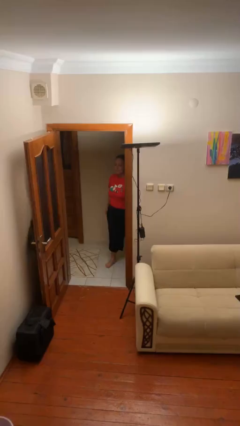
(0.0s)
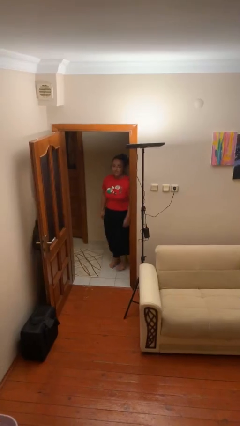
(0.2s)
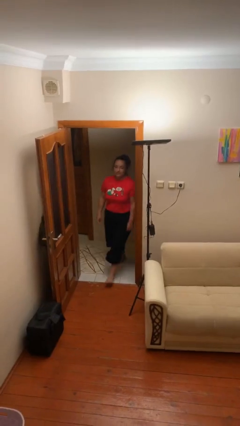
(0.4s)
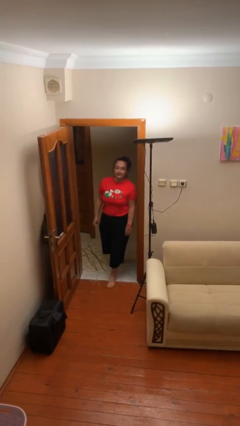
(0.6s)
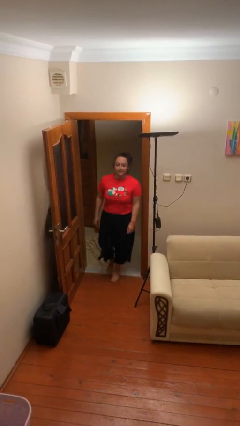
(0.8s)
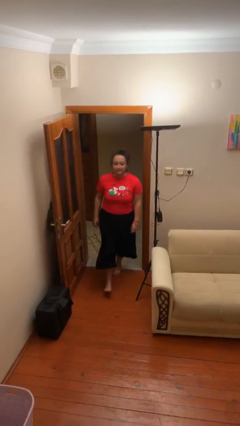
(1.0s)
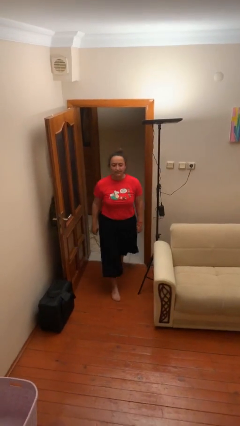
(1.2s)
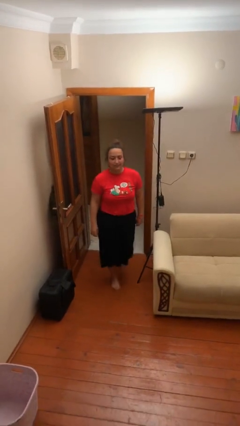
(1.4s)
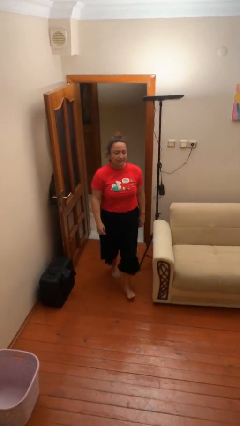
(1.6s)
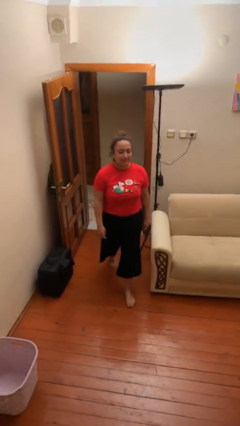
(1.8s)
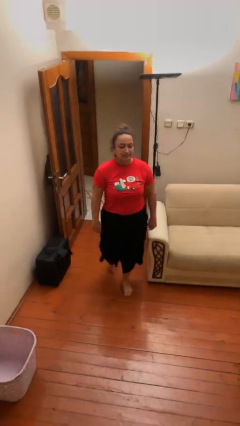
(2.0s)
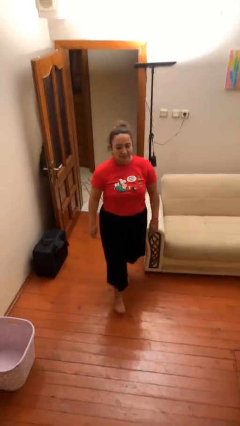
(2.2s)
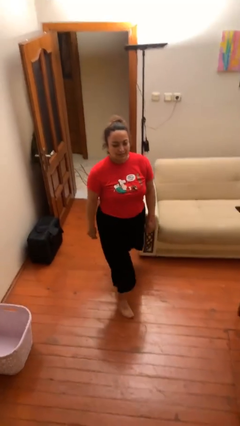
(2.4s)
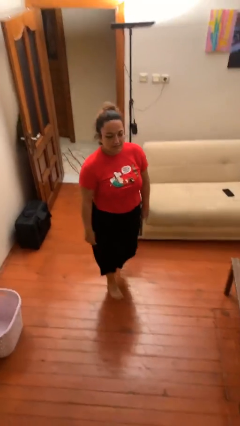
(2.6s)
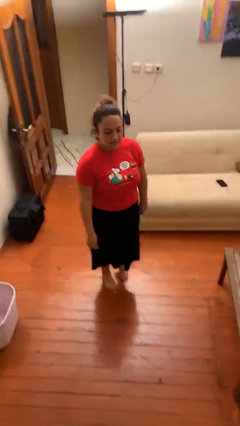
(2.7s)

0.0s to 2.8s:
person enters scene through structure

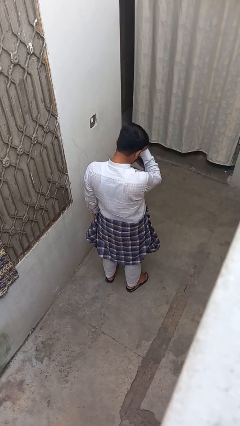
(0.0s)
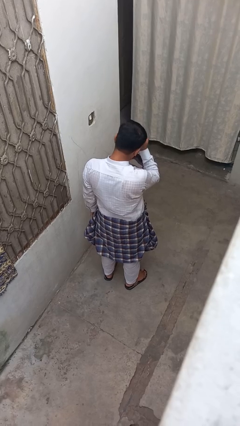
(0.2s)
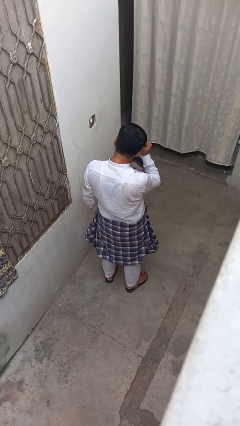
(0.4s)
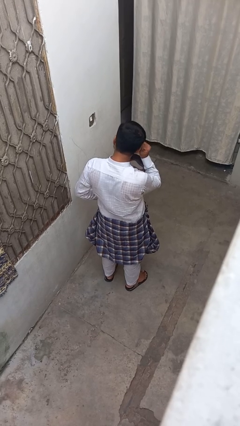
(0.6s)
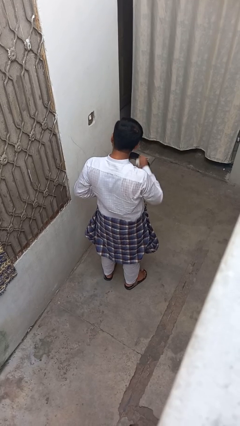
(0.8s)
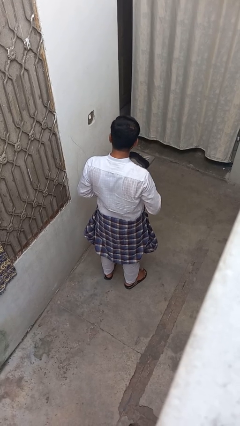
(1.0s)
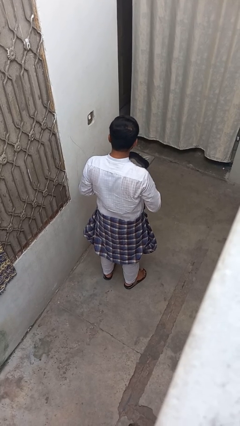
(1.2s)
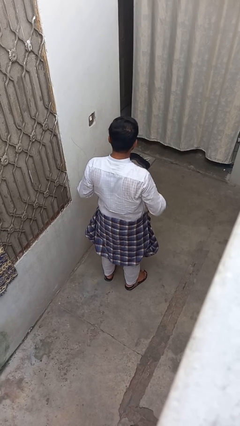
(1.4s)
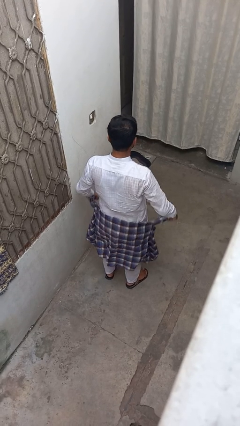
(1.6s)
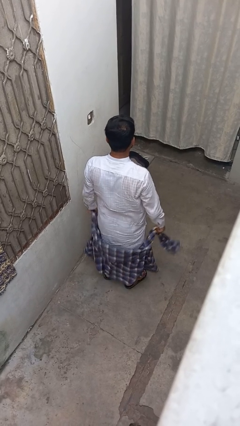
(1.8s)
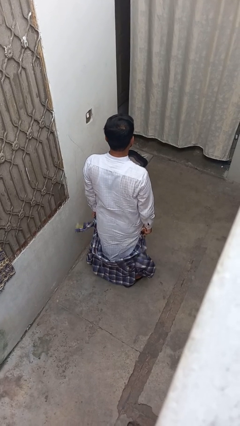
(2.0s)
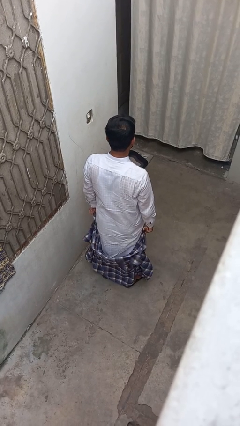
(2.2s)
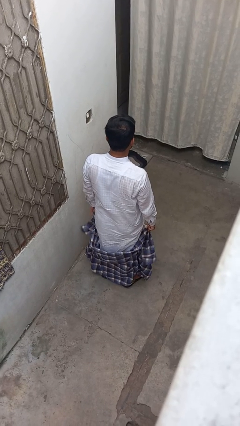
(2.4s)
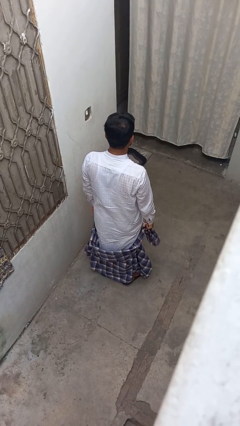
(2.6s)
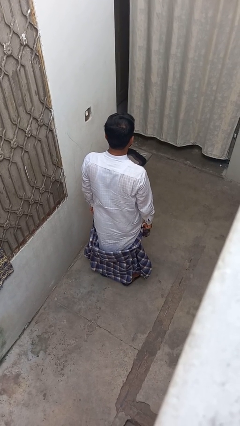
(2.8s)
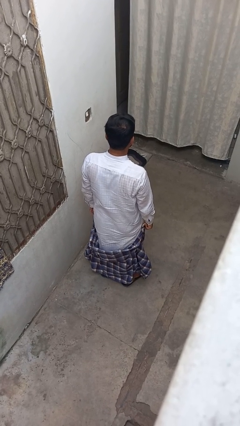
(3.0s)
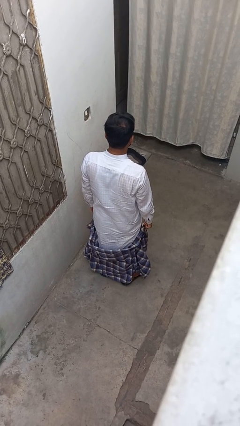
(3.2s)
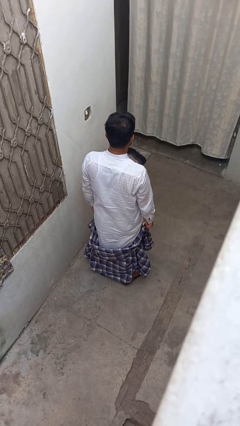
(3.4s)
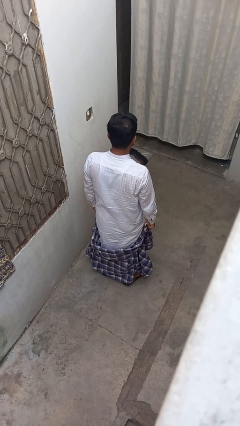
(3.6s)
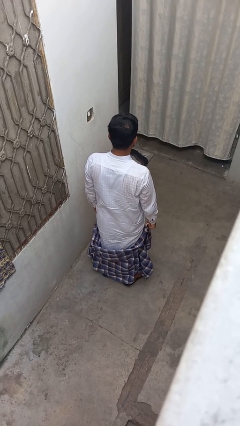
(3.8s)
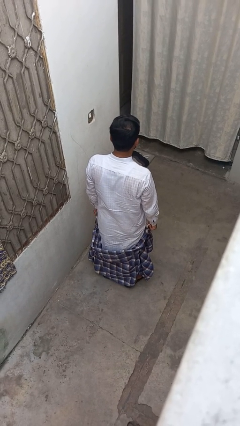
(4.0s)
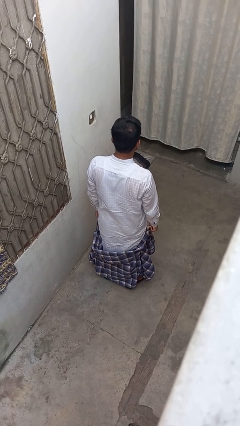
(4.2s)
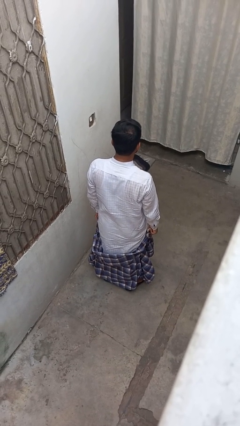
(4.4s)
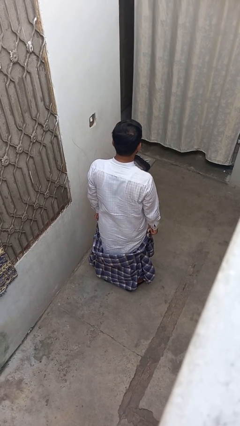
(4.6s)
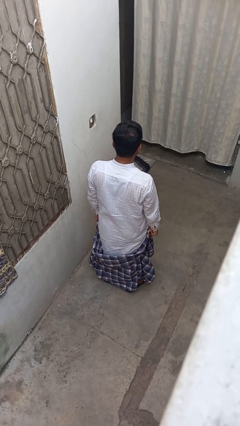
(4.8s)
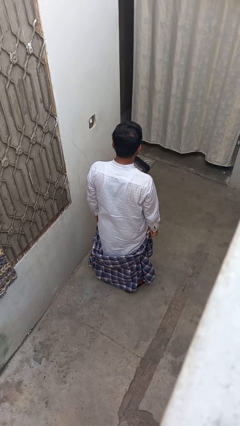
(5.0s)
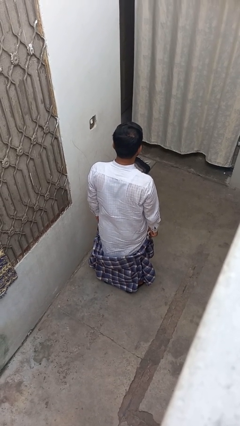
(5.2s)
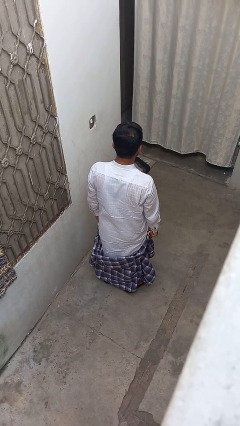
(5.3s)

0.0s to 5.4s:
person unties jacket around waist

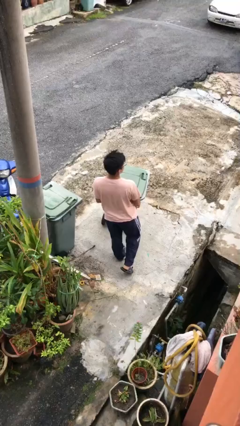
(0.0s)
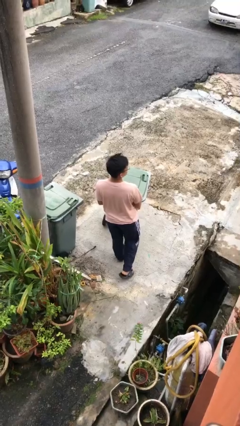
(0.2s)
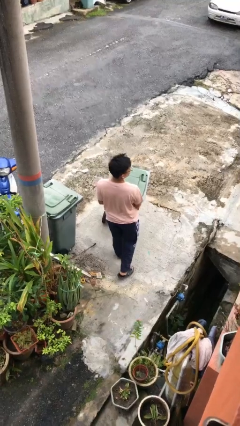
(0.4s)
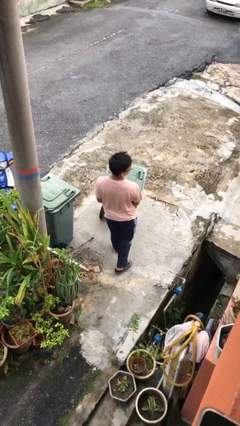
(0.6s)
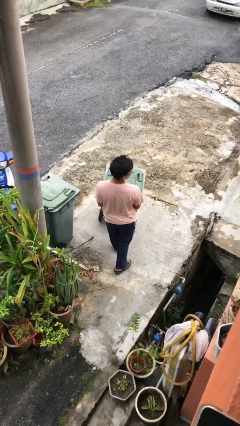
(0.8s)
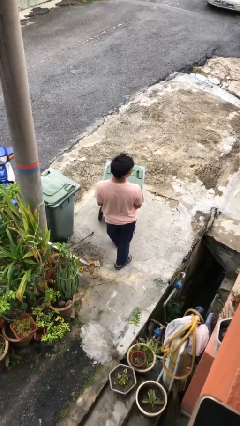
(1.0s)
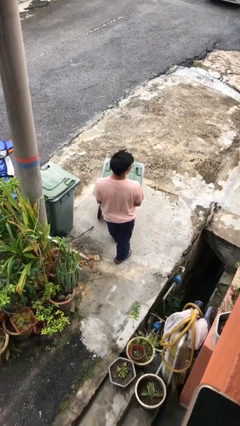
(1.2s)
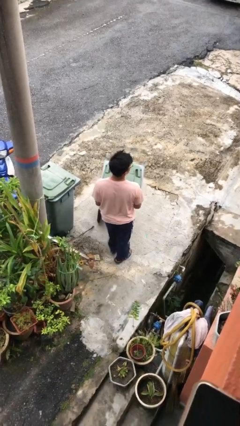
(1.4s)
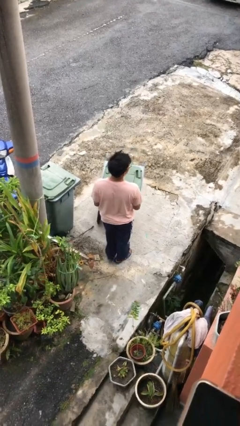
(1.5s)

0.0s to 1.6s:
person pulls wheeled trashcan

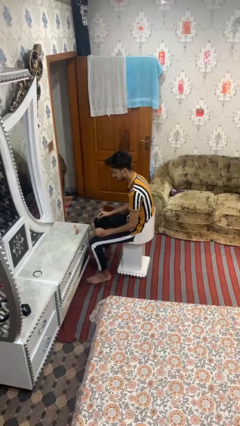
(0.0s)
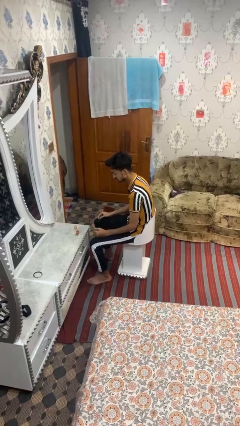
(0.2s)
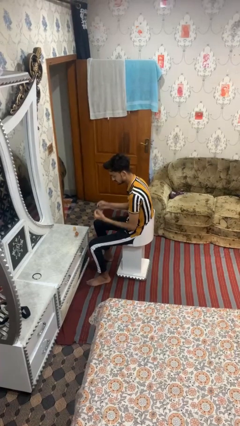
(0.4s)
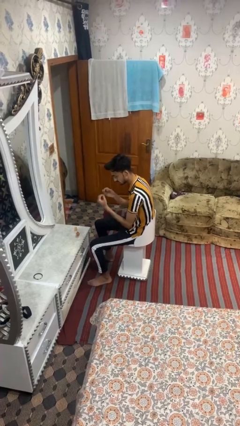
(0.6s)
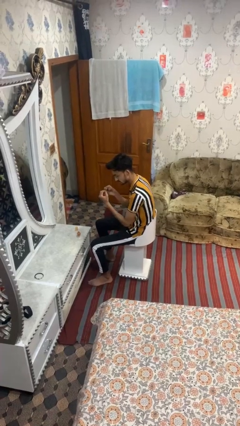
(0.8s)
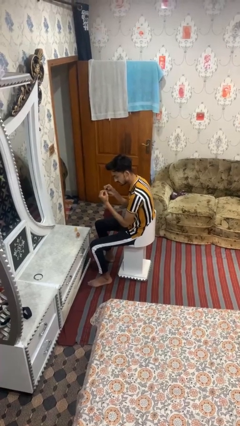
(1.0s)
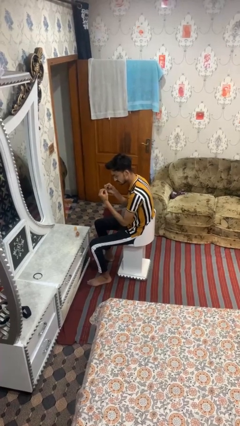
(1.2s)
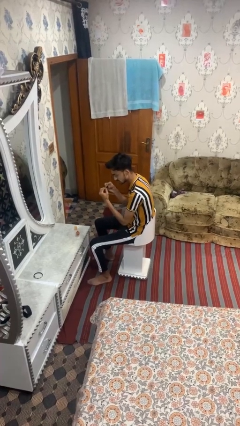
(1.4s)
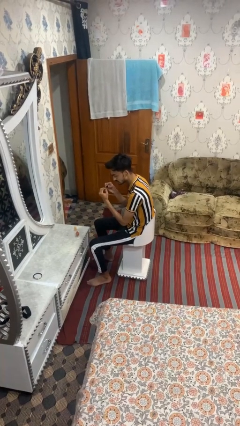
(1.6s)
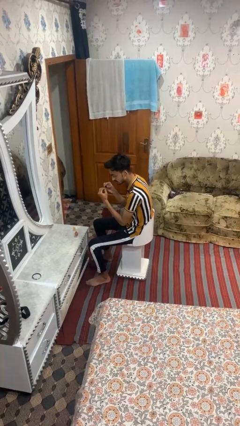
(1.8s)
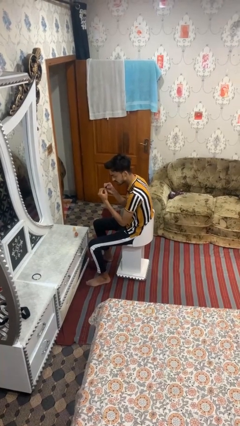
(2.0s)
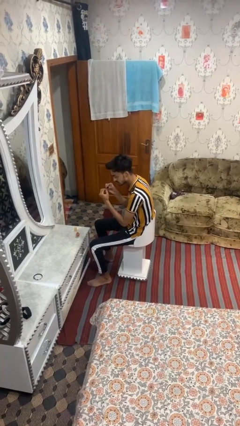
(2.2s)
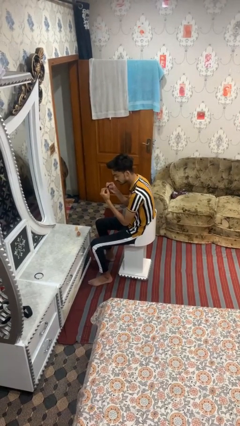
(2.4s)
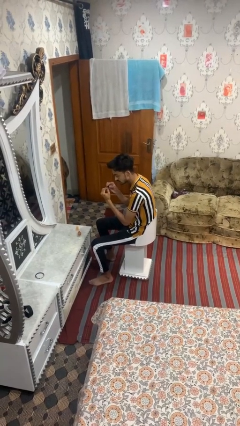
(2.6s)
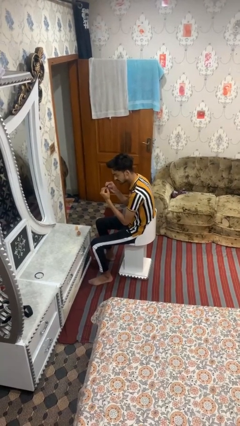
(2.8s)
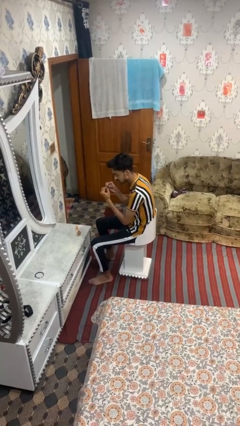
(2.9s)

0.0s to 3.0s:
person paints fingernails

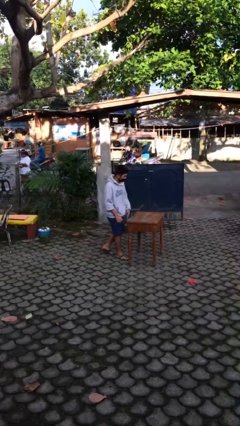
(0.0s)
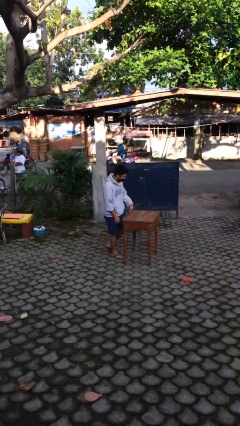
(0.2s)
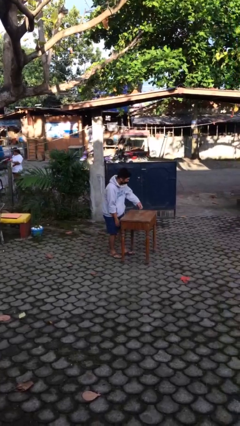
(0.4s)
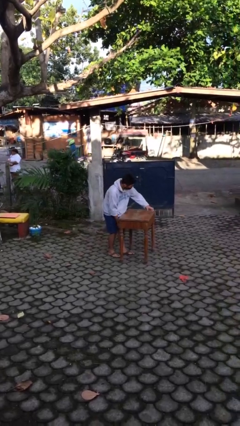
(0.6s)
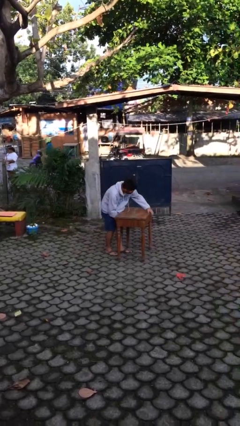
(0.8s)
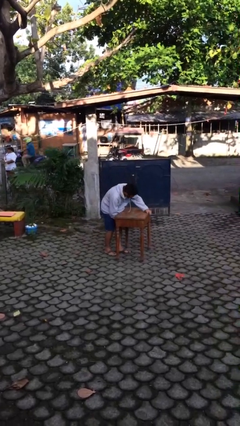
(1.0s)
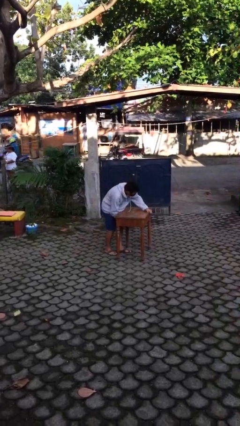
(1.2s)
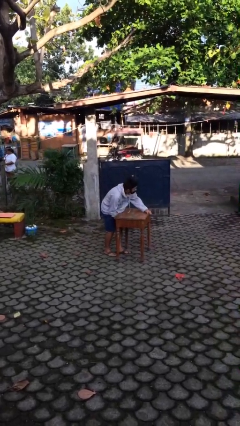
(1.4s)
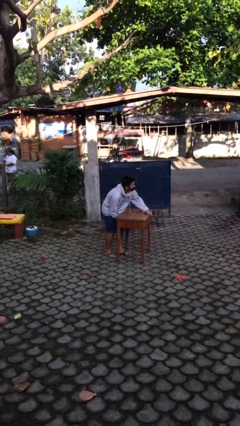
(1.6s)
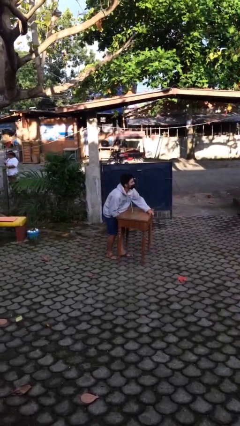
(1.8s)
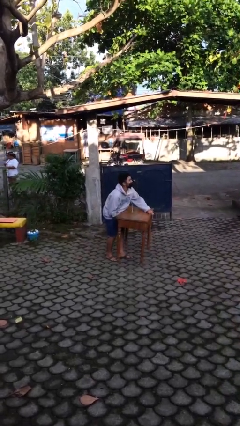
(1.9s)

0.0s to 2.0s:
person picks up object from floor

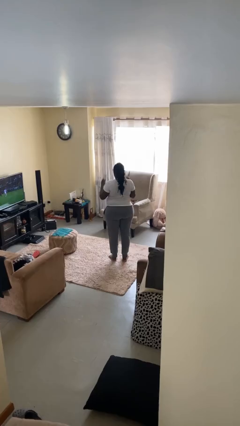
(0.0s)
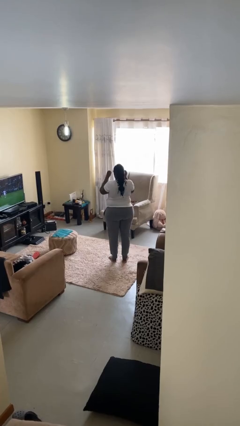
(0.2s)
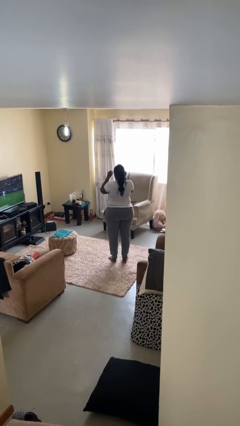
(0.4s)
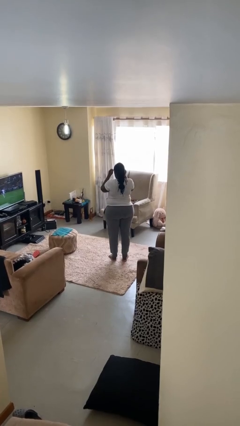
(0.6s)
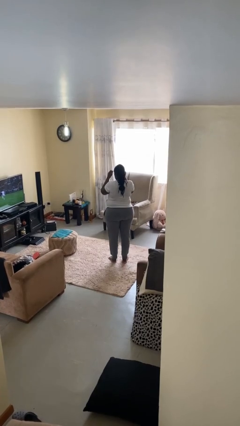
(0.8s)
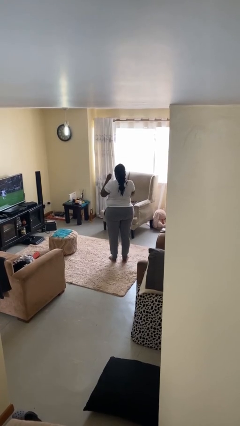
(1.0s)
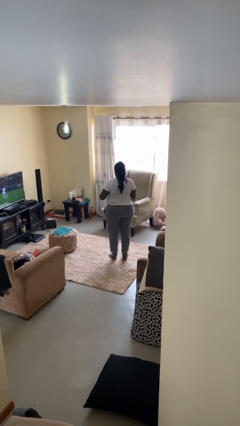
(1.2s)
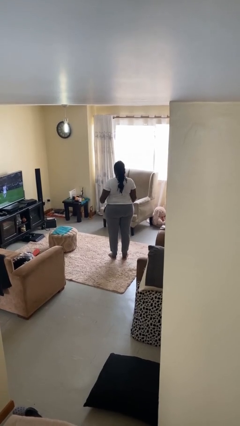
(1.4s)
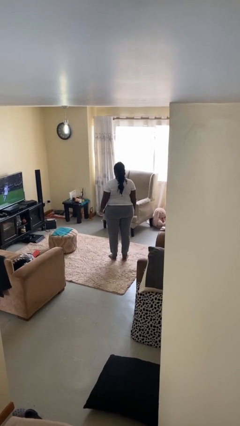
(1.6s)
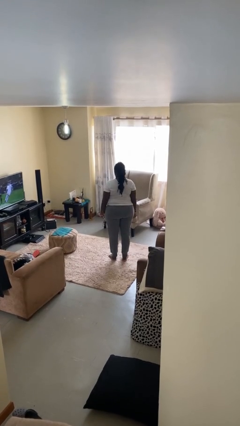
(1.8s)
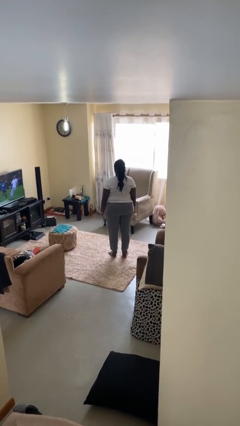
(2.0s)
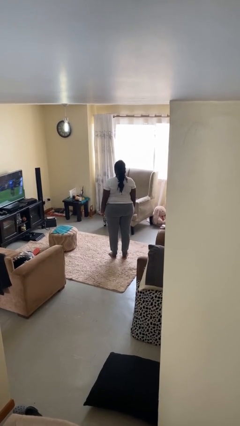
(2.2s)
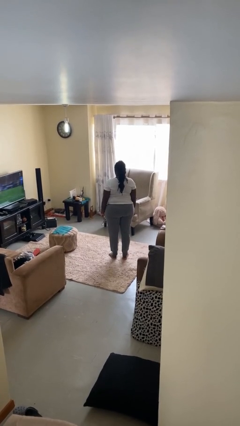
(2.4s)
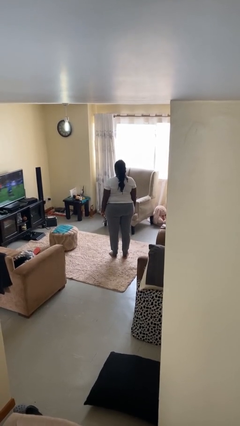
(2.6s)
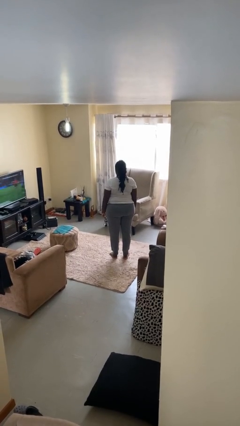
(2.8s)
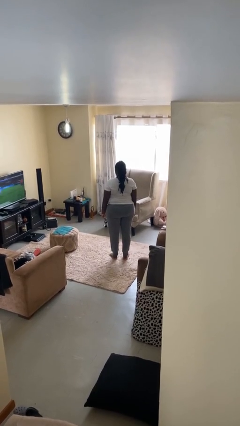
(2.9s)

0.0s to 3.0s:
person takes off glasses
